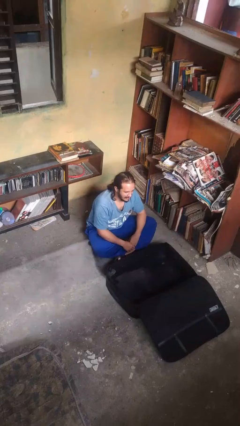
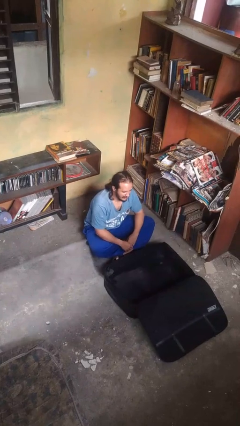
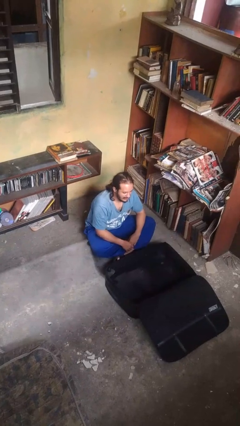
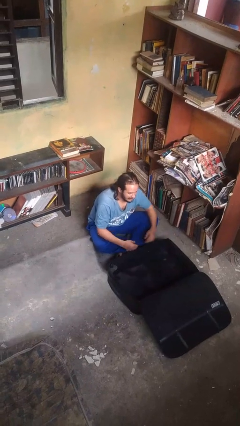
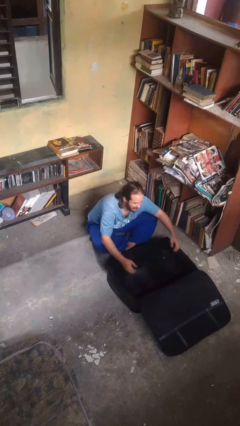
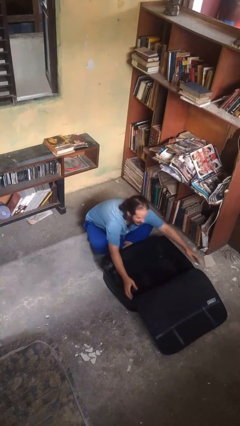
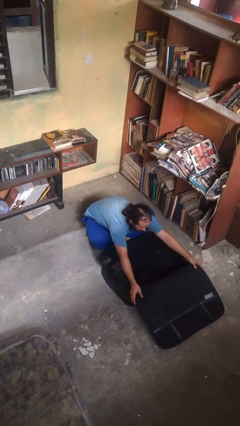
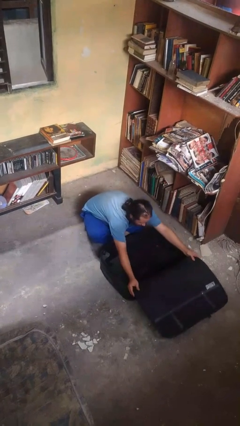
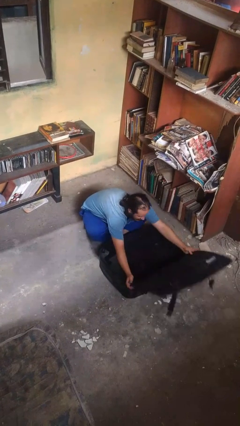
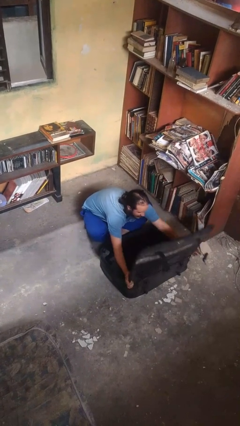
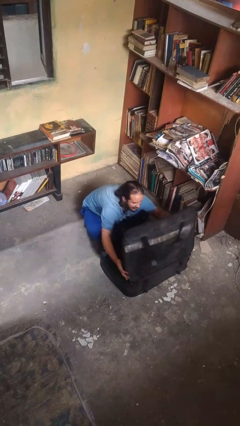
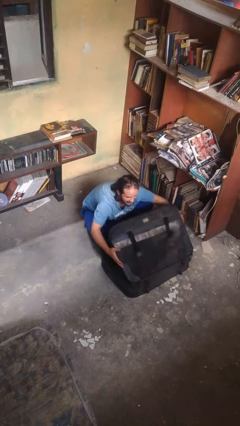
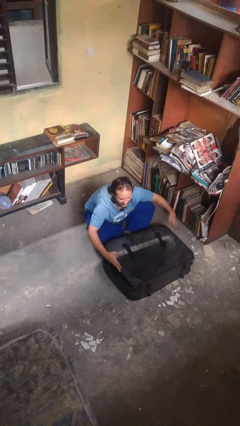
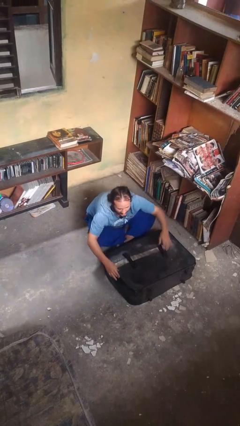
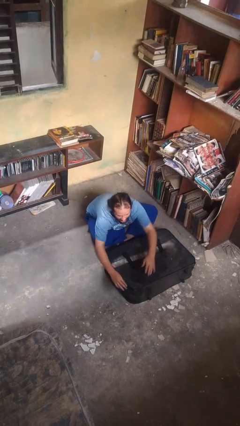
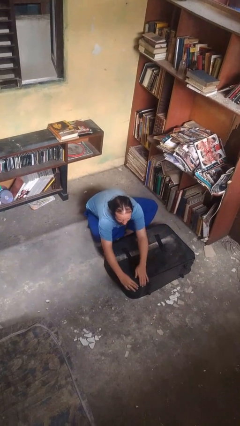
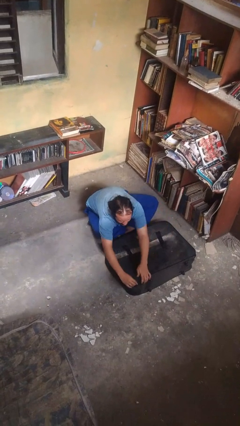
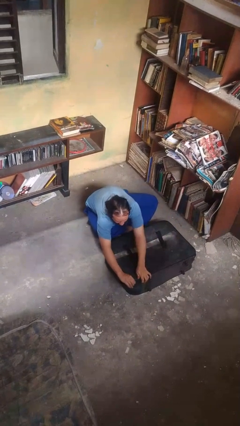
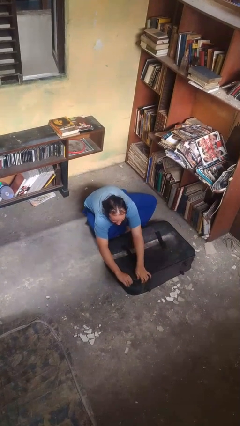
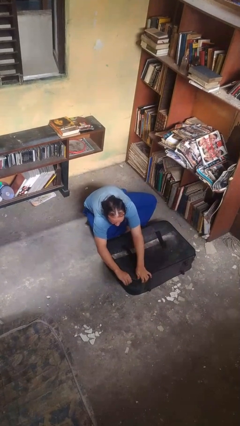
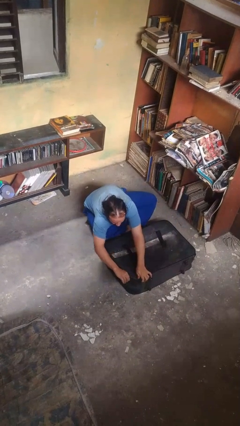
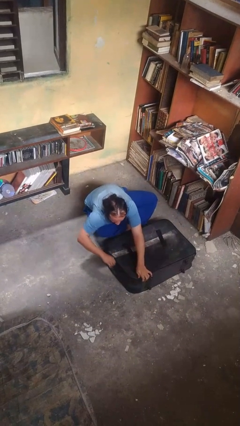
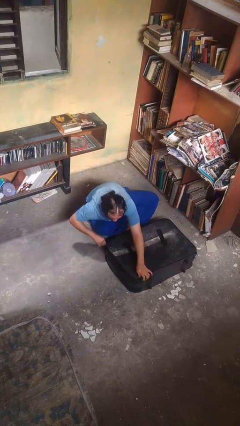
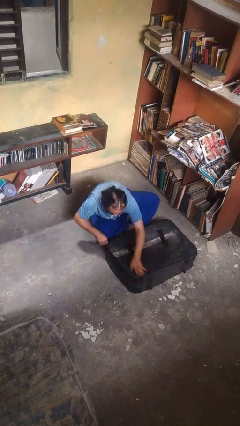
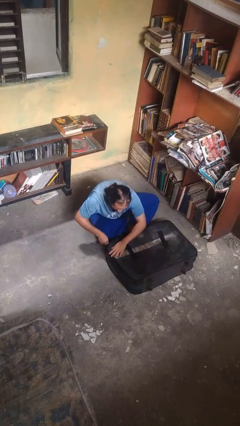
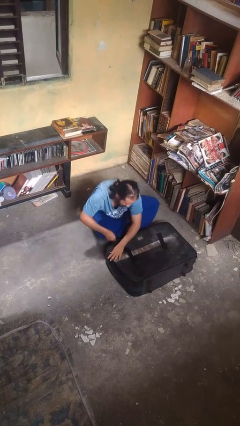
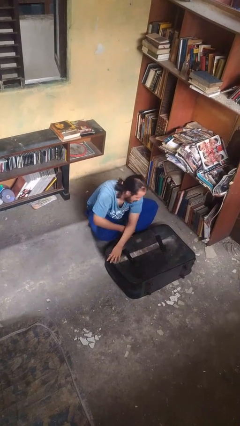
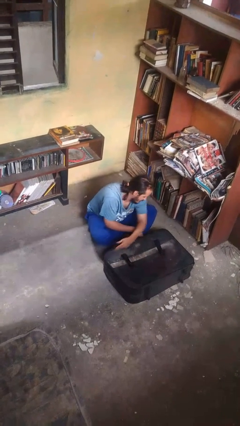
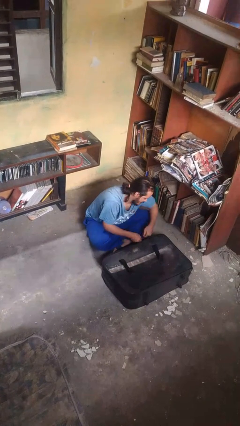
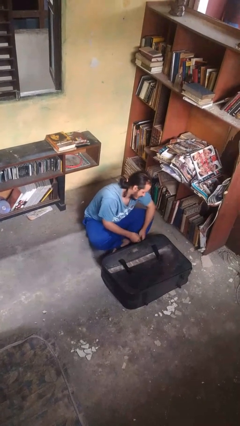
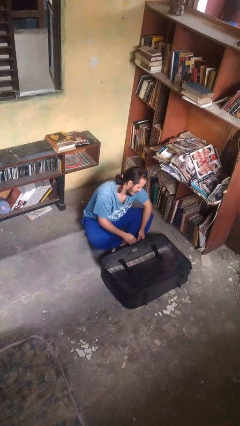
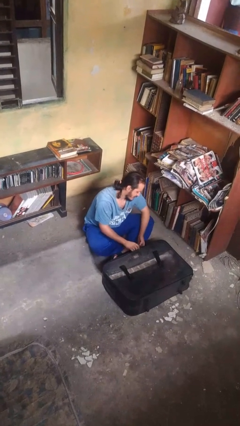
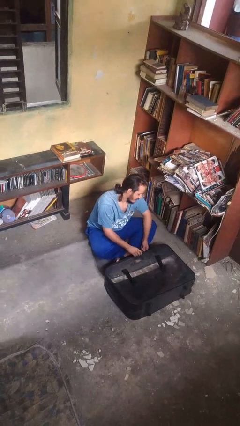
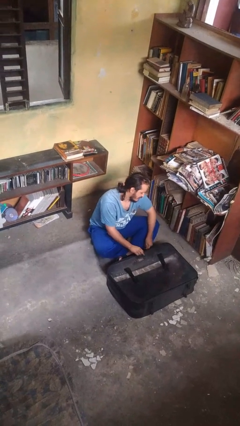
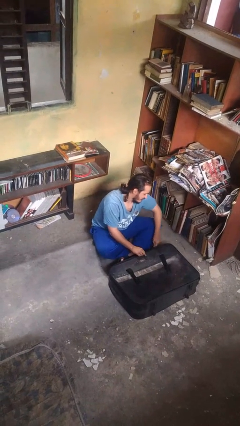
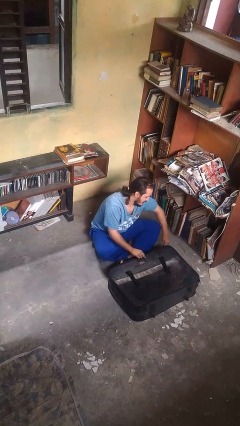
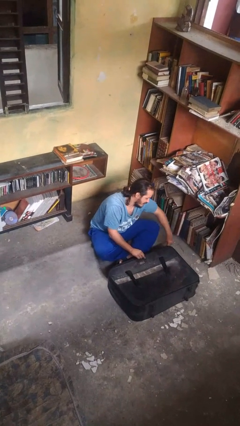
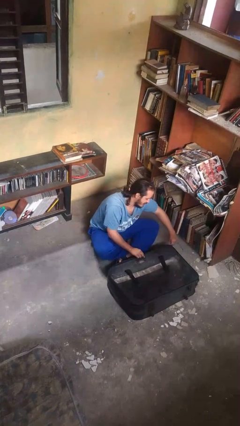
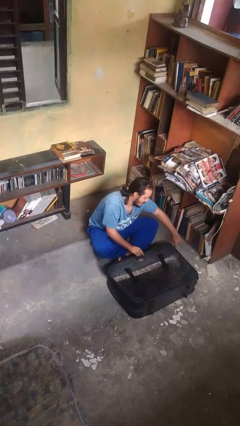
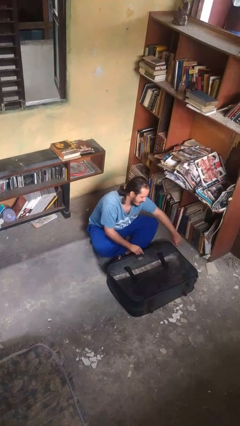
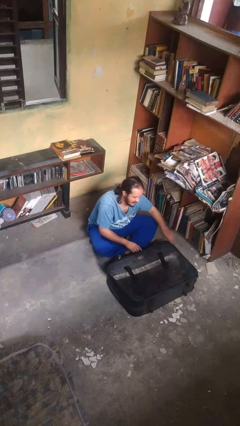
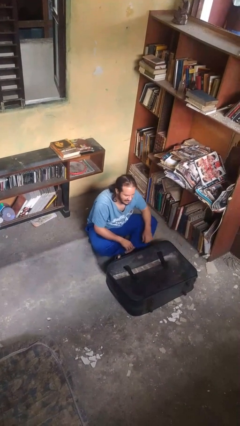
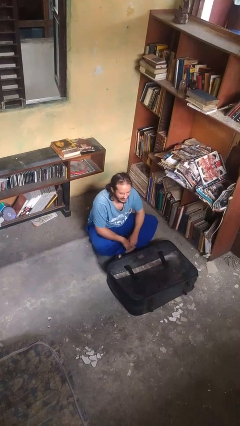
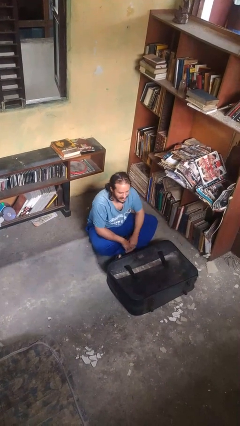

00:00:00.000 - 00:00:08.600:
person closes suitcase

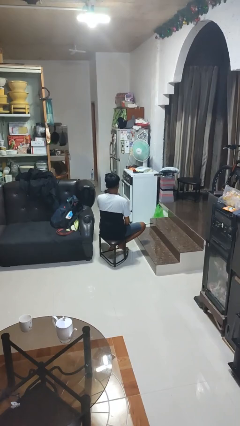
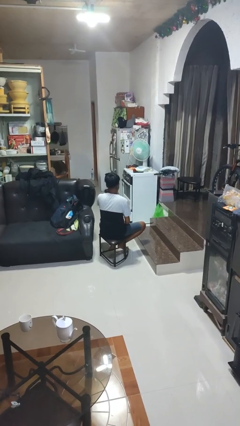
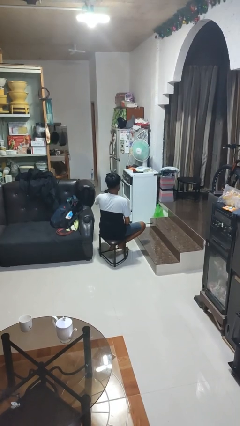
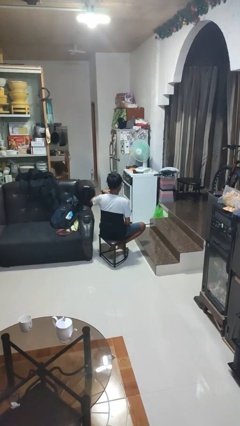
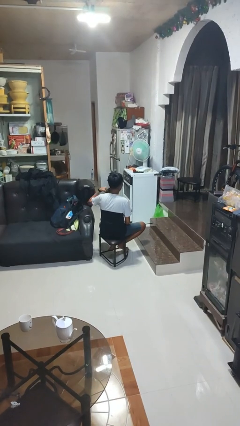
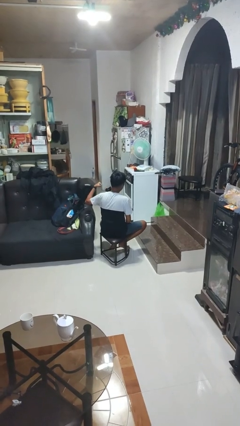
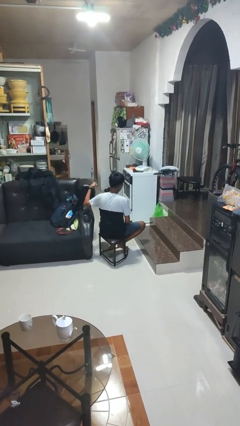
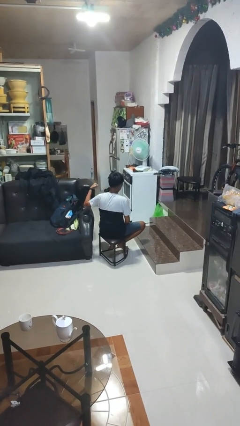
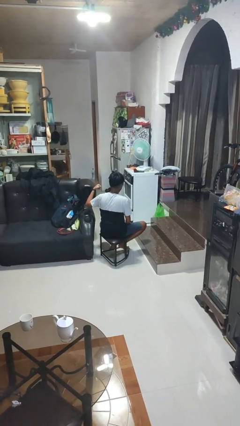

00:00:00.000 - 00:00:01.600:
person gestures cut

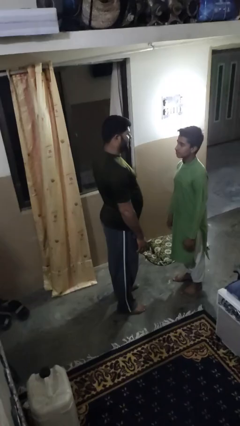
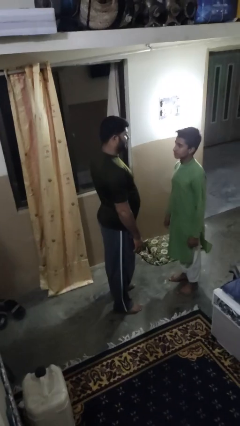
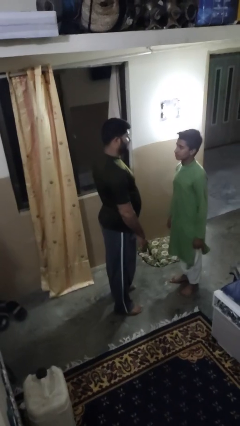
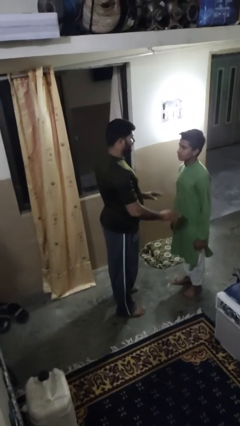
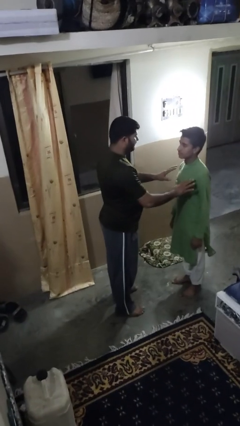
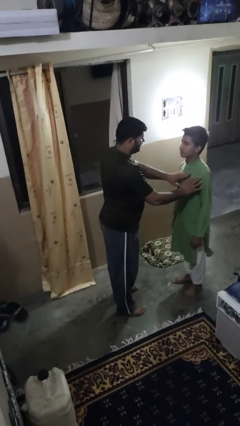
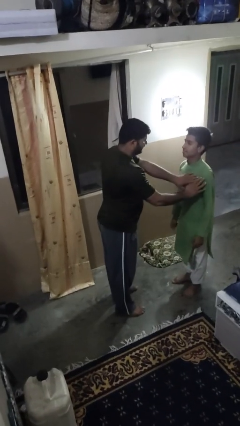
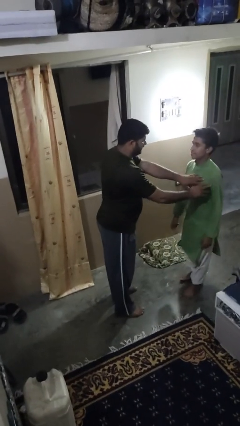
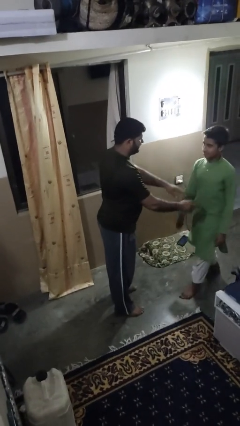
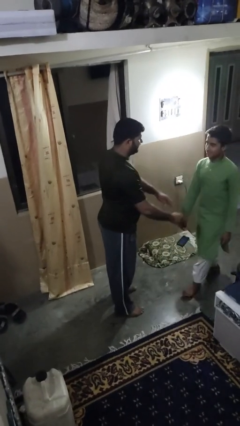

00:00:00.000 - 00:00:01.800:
person shoves person

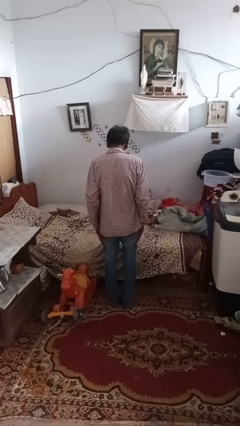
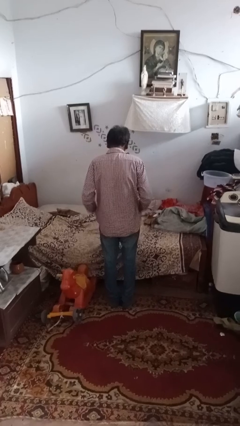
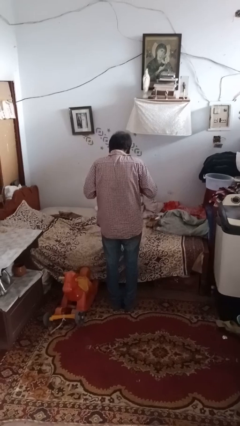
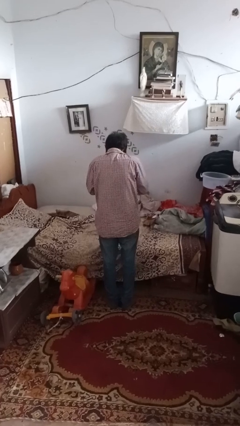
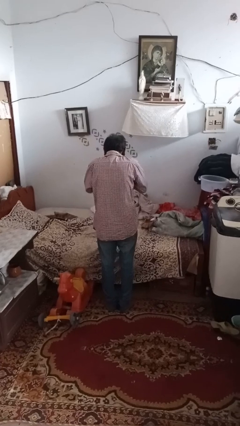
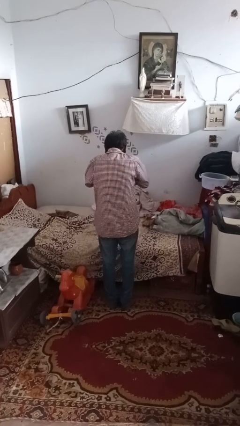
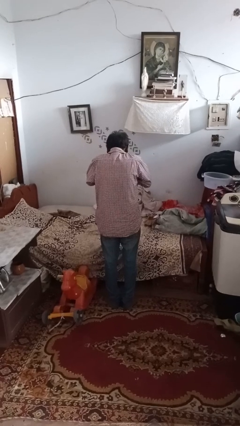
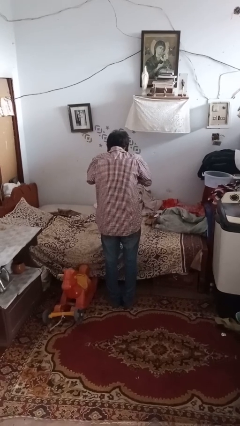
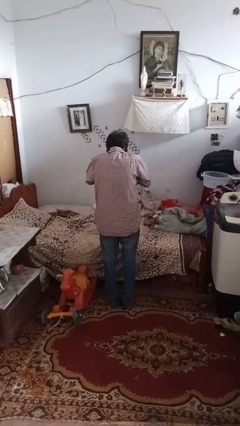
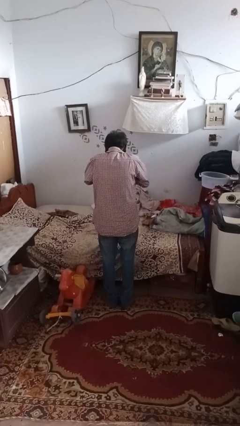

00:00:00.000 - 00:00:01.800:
person sneezes into hand

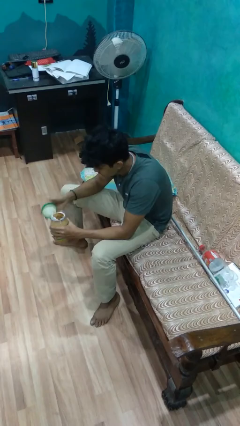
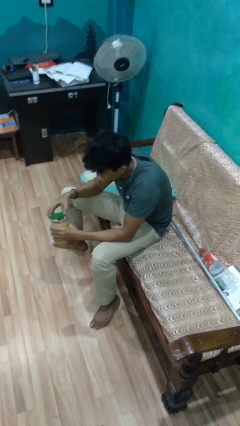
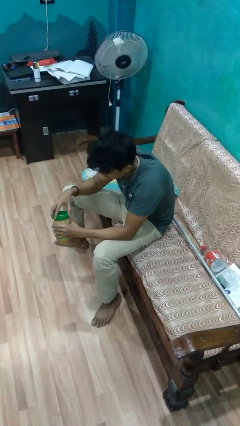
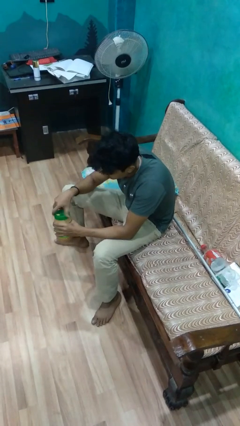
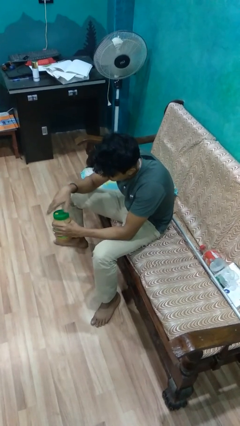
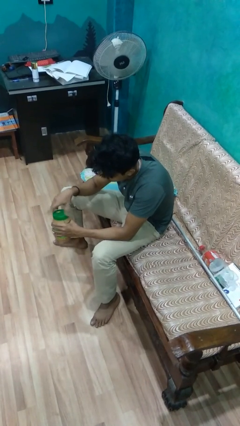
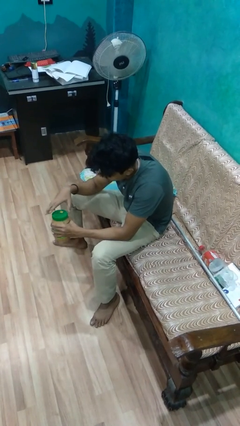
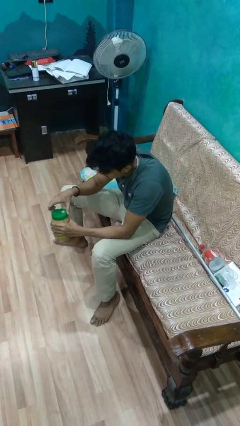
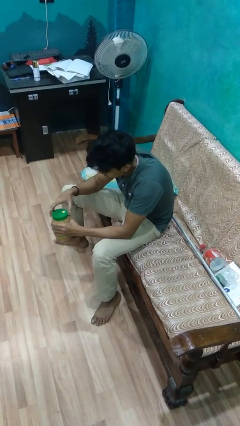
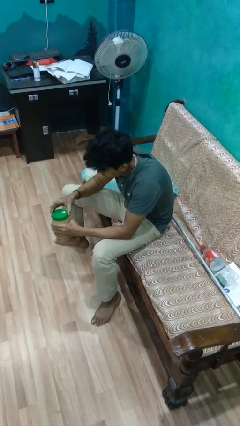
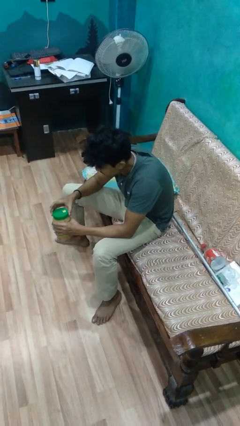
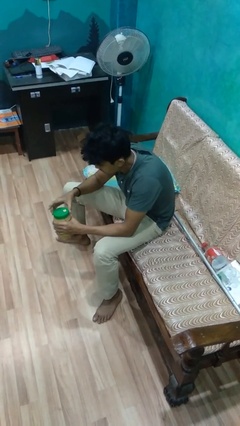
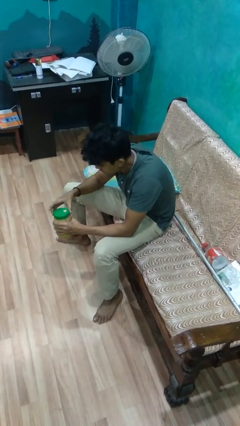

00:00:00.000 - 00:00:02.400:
person closes jar

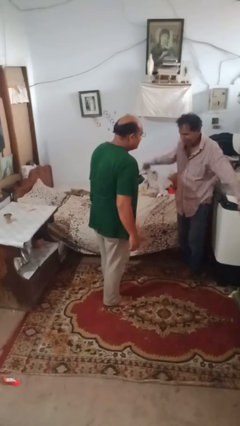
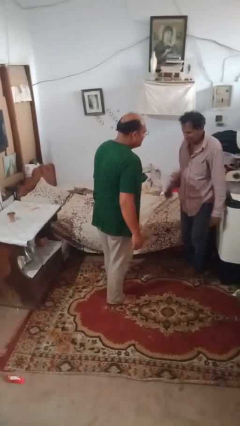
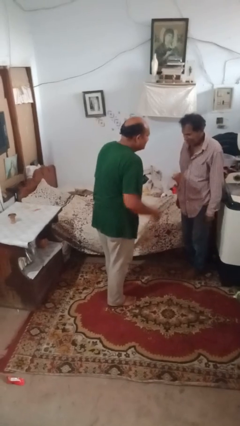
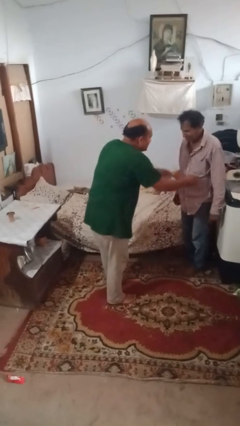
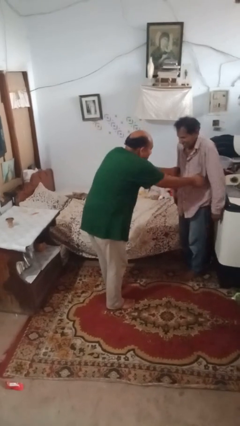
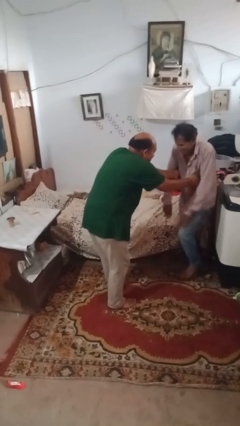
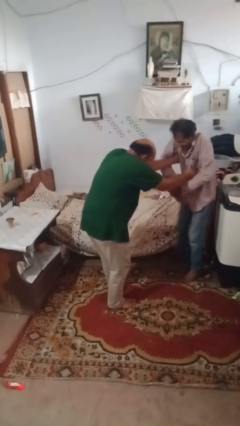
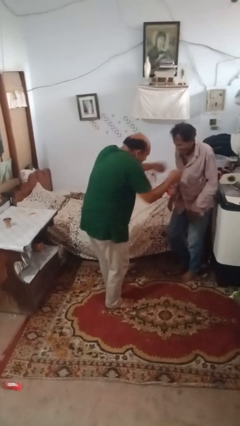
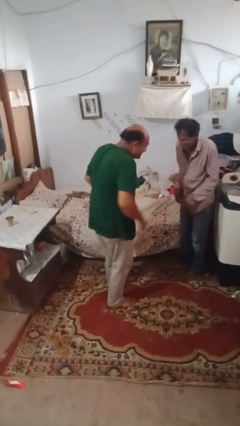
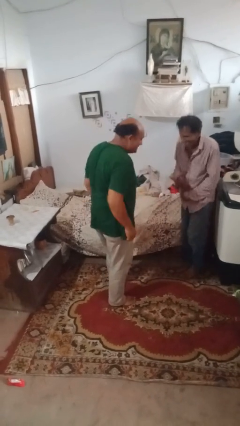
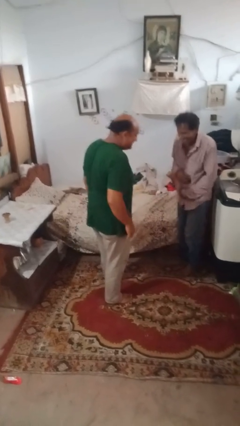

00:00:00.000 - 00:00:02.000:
person tickles person
